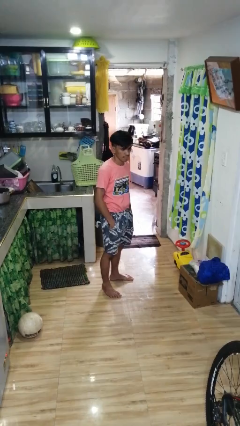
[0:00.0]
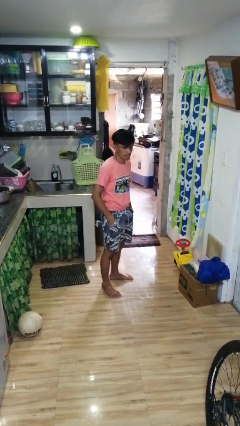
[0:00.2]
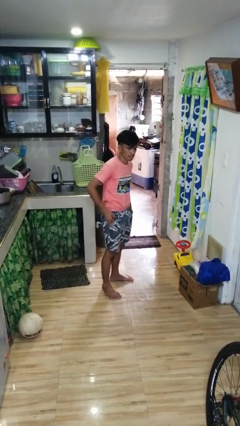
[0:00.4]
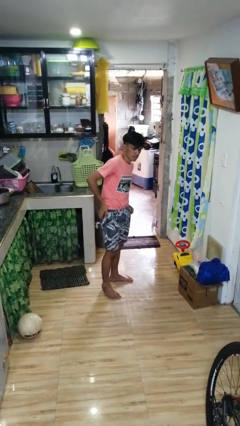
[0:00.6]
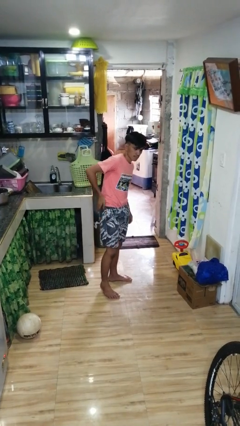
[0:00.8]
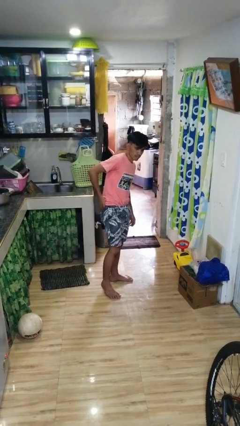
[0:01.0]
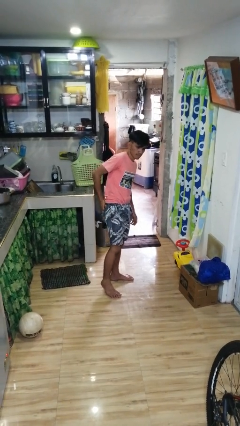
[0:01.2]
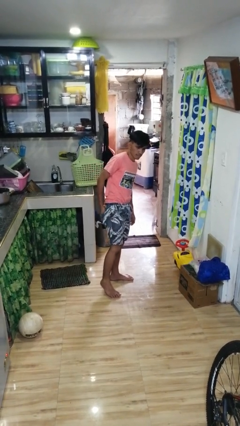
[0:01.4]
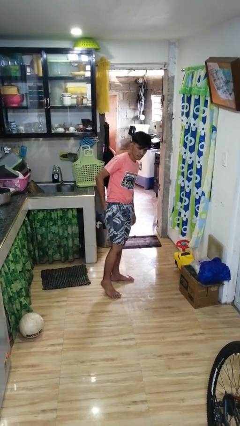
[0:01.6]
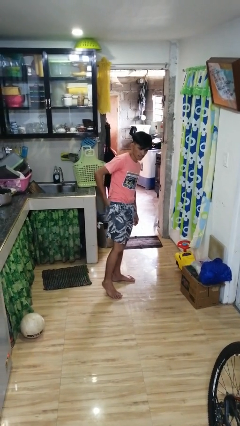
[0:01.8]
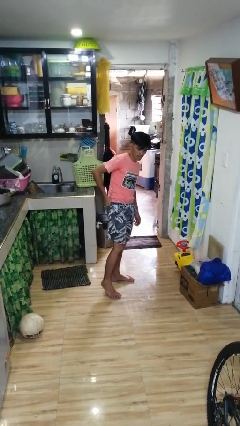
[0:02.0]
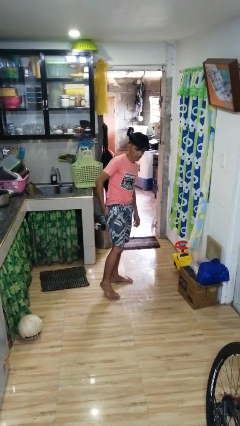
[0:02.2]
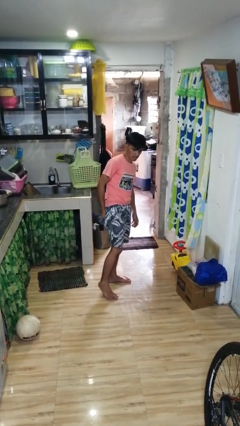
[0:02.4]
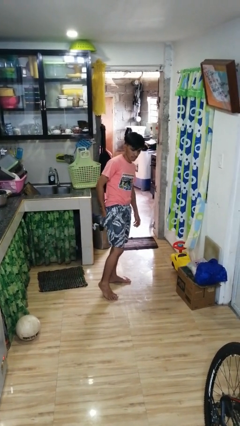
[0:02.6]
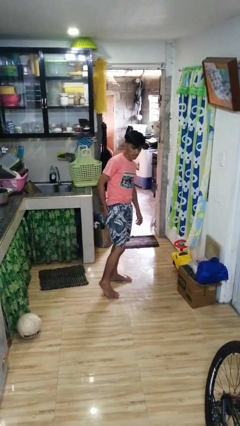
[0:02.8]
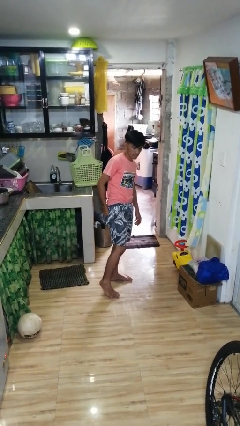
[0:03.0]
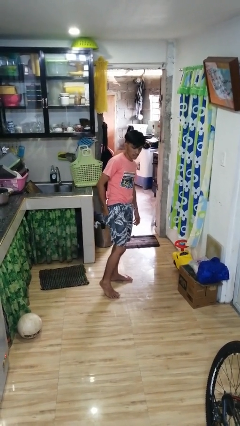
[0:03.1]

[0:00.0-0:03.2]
person puts hands in back pockets

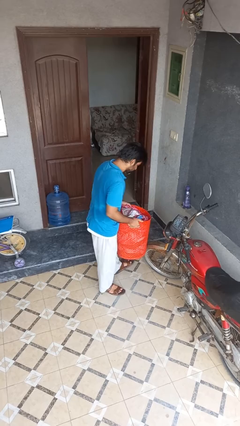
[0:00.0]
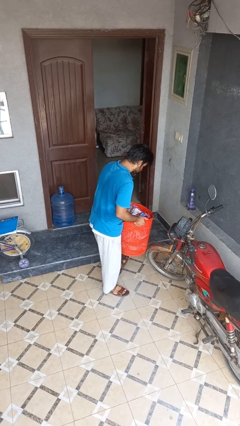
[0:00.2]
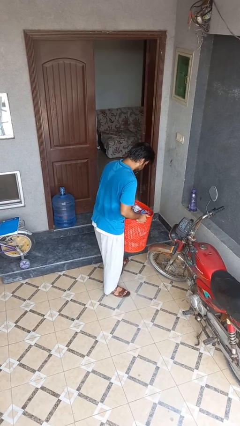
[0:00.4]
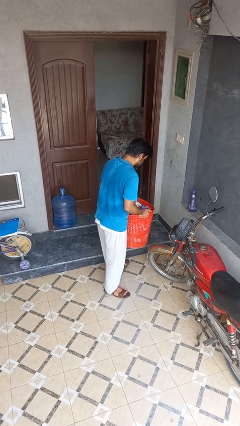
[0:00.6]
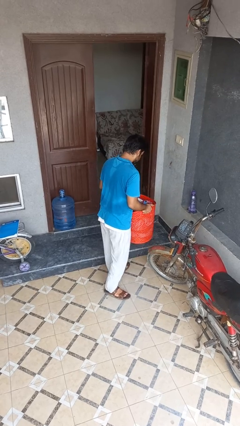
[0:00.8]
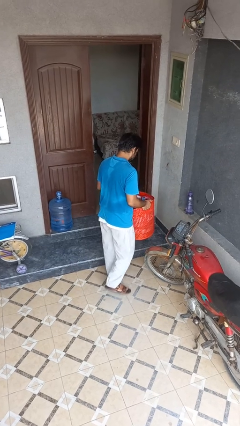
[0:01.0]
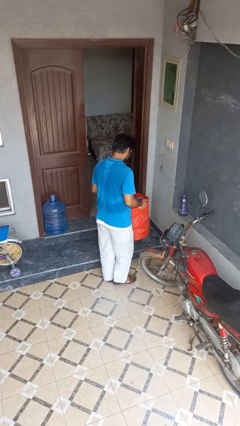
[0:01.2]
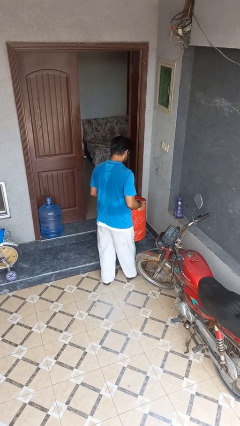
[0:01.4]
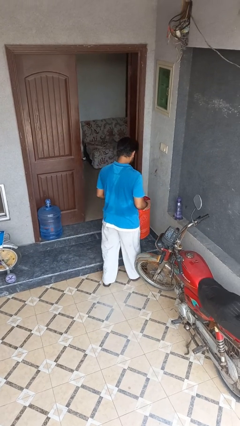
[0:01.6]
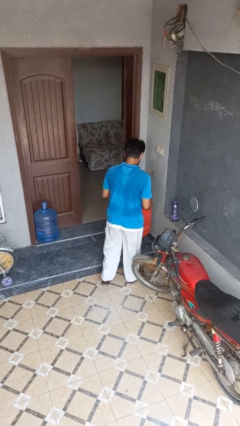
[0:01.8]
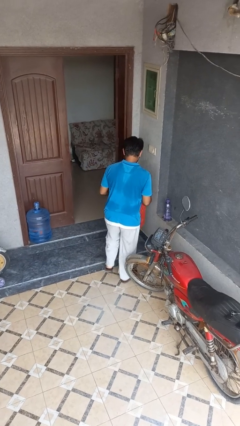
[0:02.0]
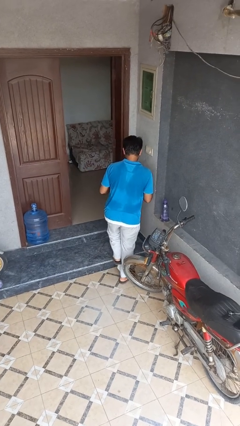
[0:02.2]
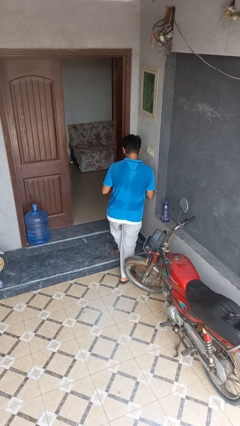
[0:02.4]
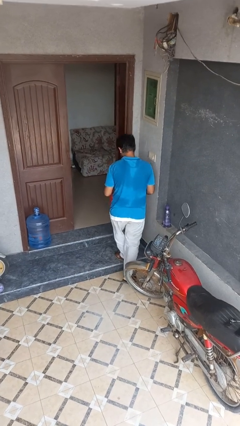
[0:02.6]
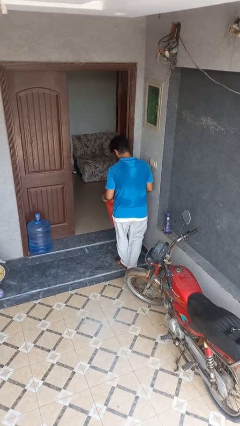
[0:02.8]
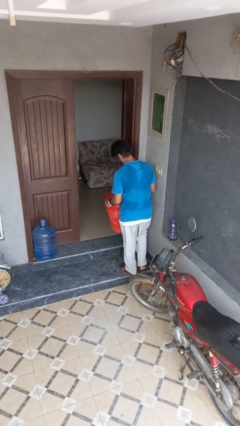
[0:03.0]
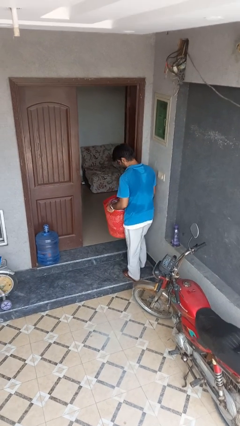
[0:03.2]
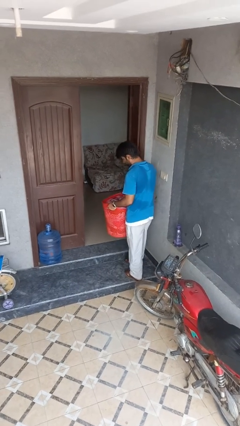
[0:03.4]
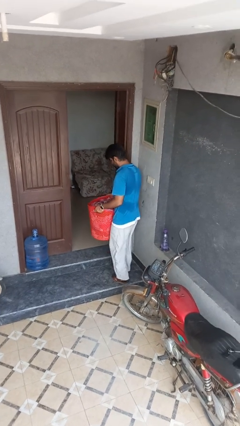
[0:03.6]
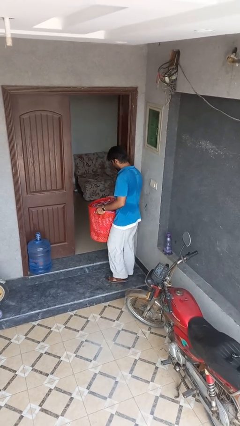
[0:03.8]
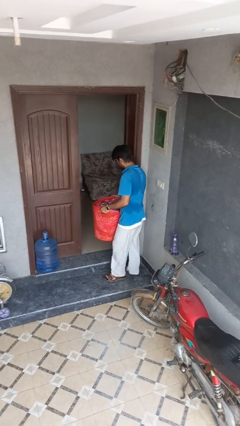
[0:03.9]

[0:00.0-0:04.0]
person carries laundry basket

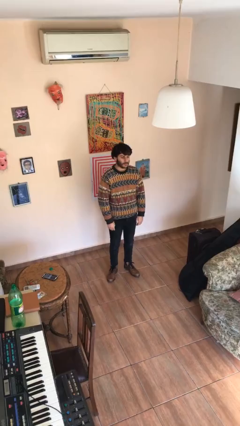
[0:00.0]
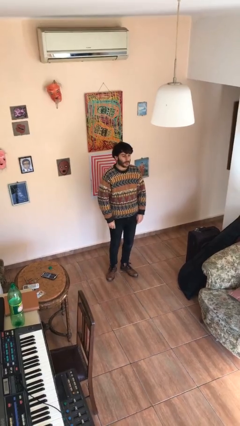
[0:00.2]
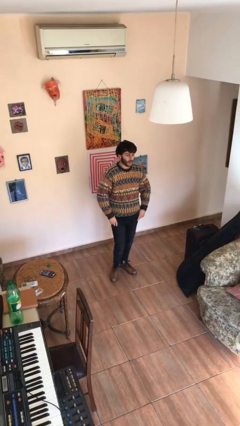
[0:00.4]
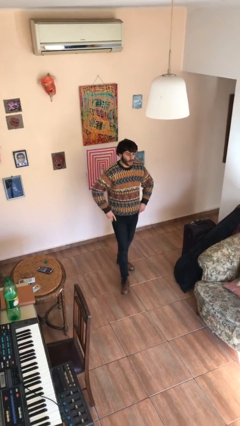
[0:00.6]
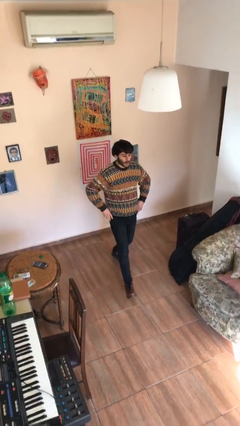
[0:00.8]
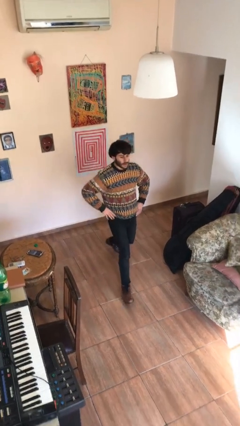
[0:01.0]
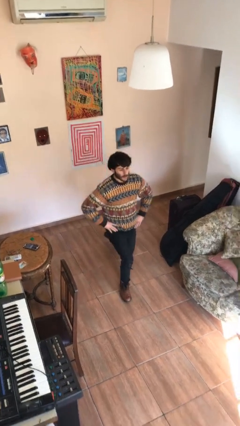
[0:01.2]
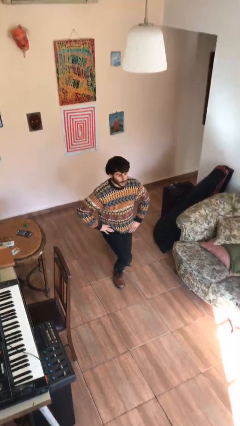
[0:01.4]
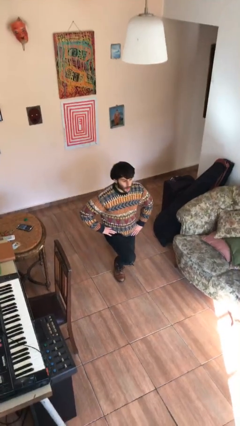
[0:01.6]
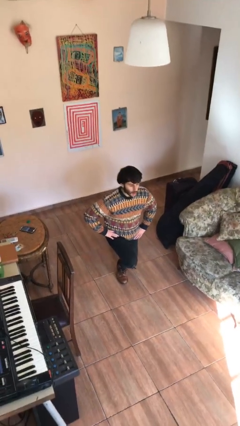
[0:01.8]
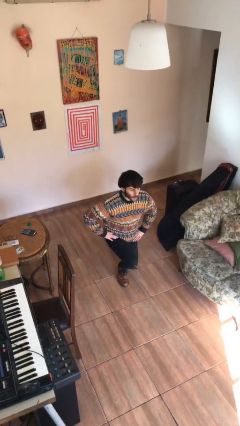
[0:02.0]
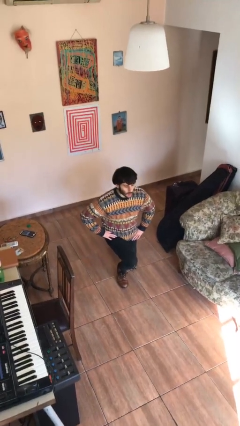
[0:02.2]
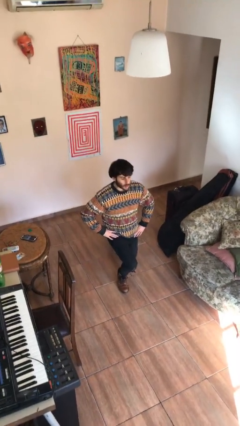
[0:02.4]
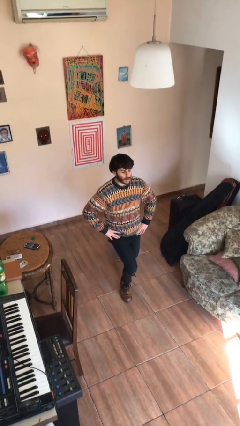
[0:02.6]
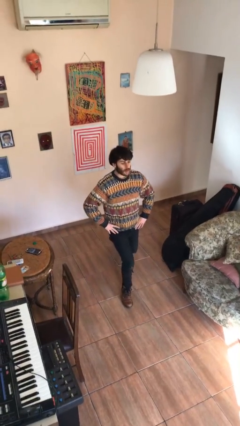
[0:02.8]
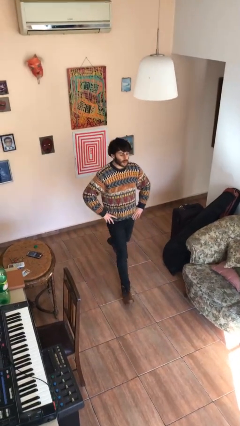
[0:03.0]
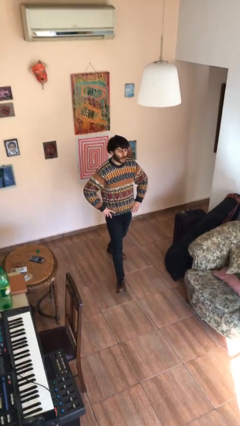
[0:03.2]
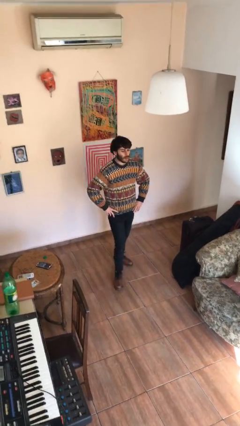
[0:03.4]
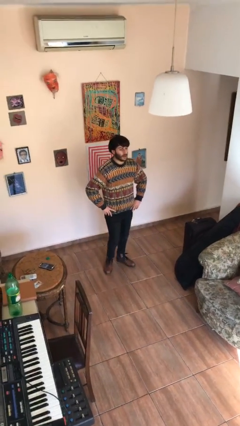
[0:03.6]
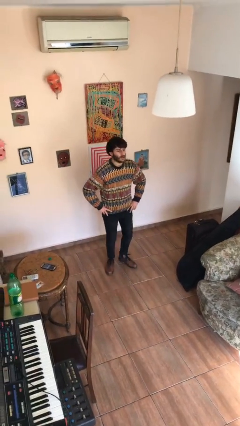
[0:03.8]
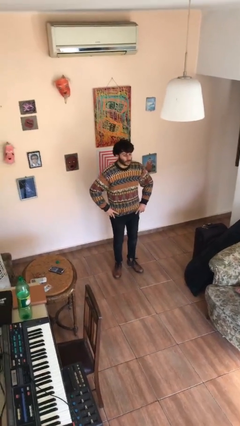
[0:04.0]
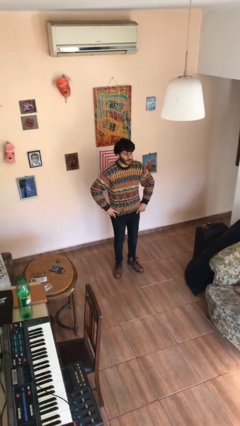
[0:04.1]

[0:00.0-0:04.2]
person exercises with lunges

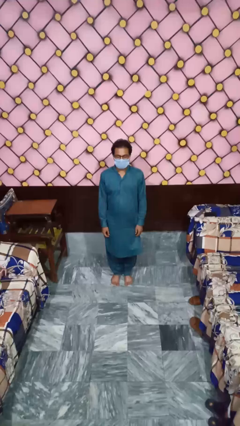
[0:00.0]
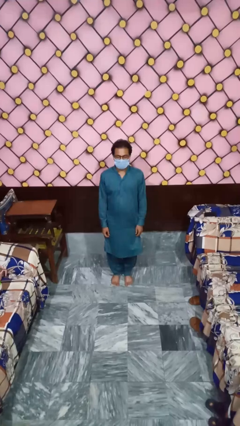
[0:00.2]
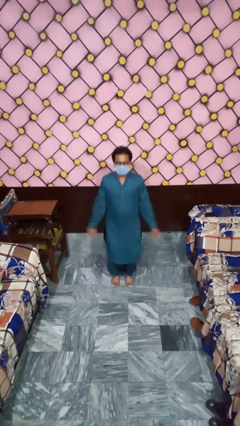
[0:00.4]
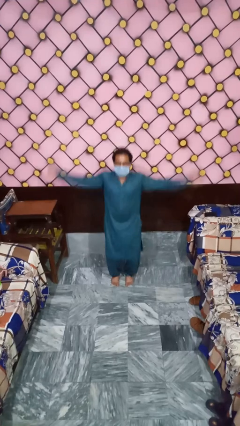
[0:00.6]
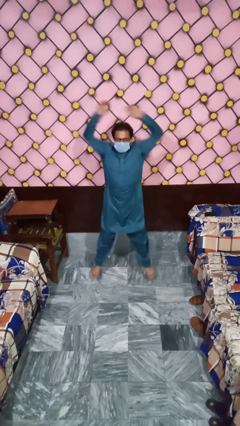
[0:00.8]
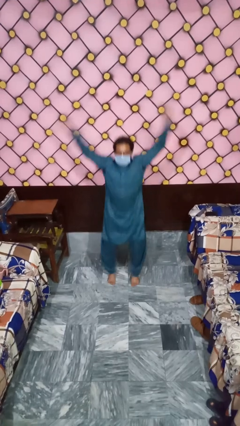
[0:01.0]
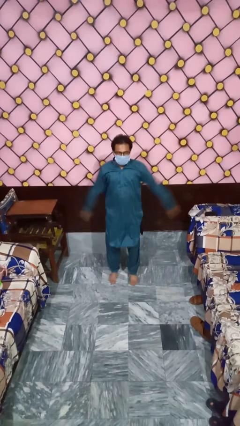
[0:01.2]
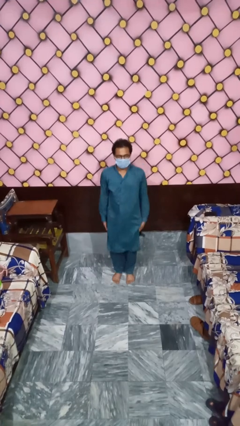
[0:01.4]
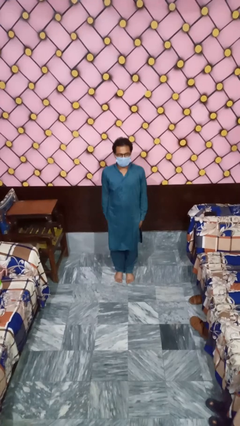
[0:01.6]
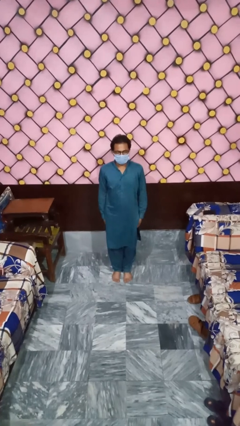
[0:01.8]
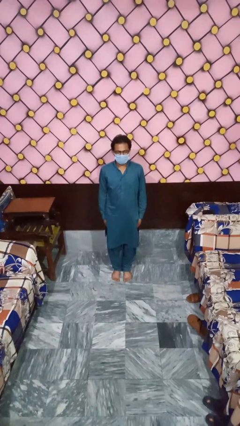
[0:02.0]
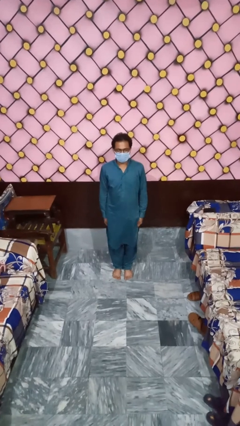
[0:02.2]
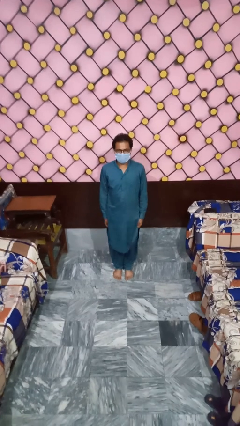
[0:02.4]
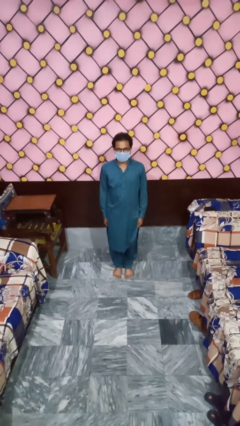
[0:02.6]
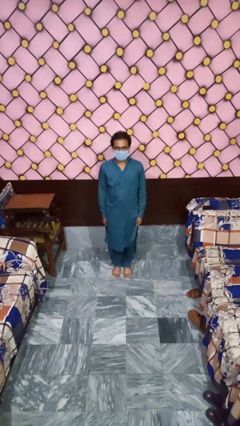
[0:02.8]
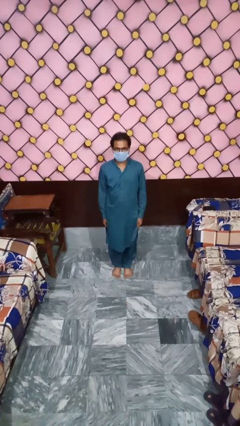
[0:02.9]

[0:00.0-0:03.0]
person exercises with jumping jacks

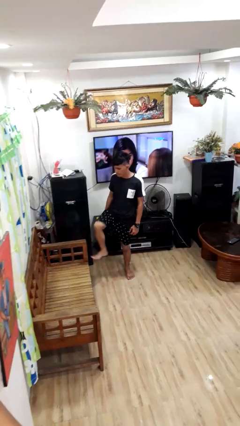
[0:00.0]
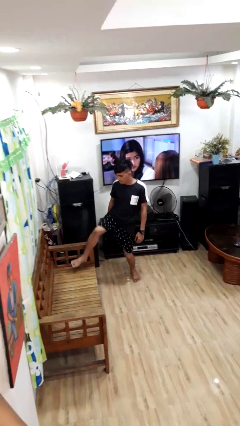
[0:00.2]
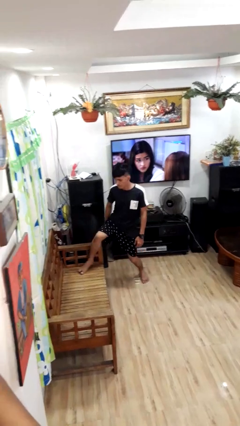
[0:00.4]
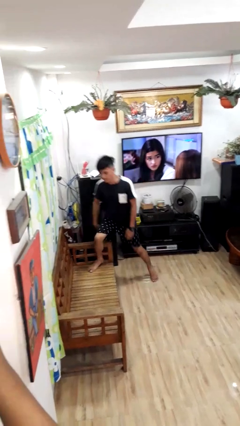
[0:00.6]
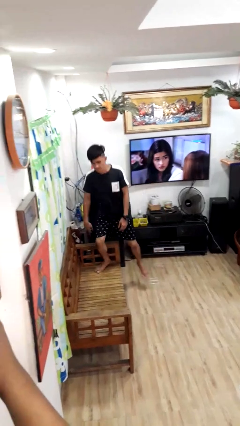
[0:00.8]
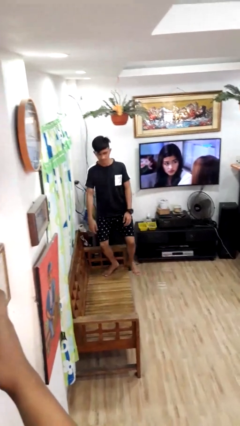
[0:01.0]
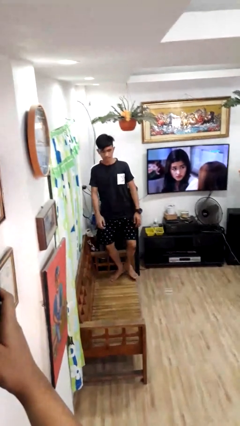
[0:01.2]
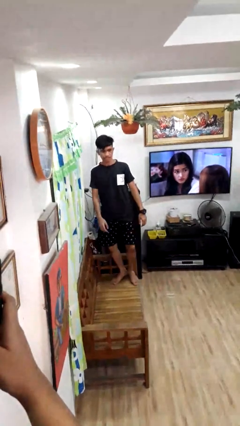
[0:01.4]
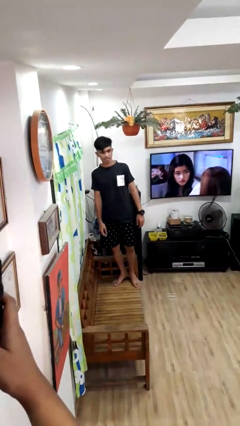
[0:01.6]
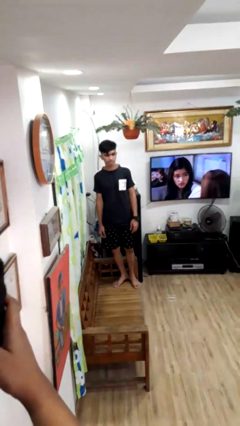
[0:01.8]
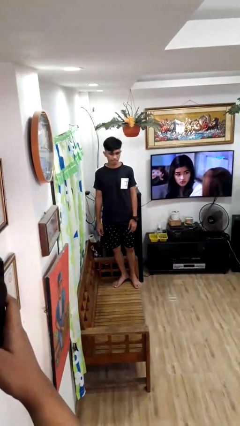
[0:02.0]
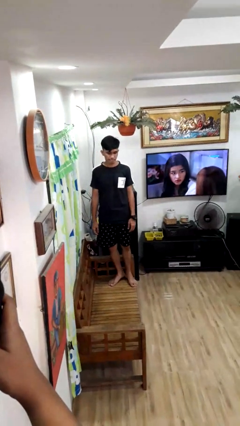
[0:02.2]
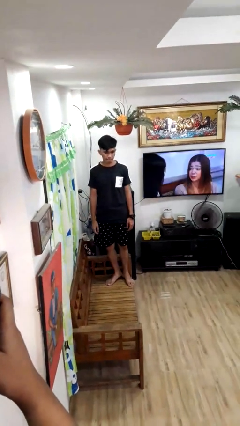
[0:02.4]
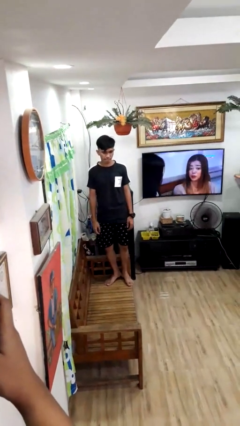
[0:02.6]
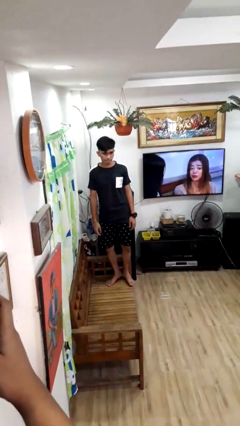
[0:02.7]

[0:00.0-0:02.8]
person climbs on couch

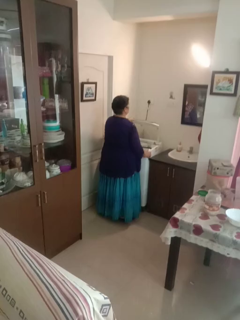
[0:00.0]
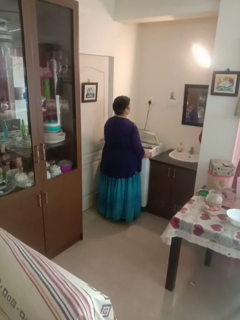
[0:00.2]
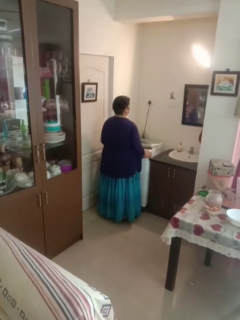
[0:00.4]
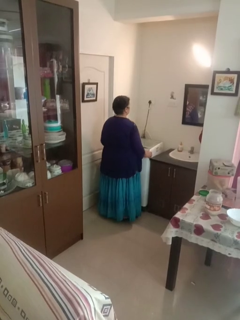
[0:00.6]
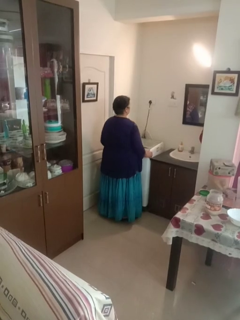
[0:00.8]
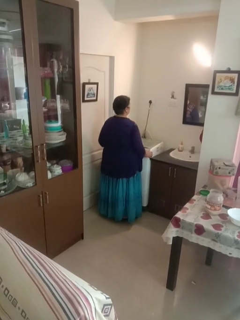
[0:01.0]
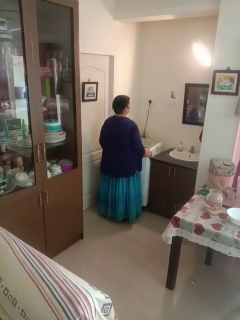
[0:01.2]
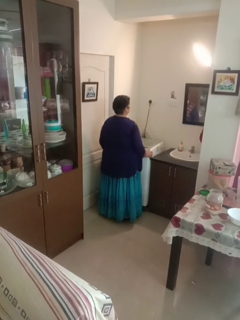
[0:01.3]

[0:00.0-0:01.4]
person closes clothes washer
